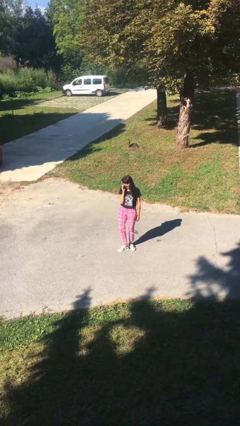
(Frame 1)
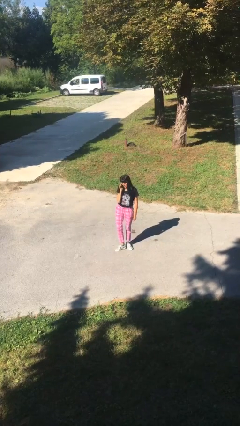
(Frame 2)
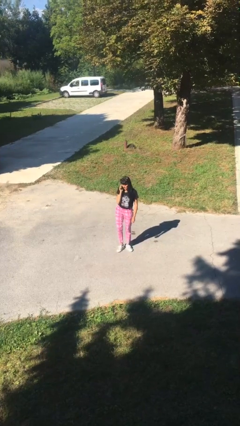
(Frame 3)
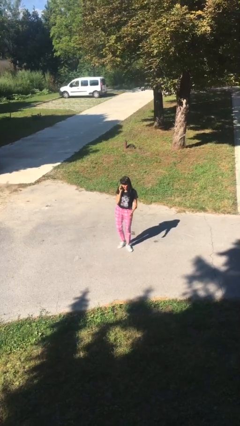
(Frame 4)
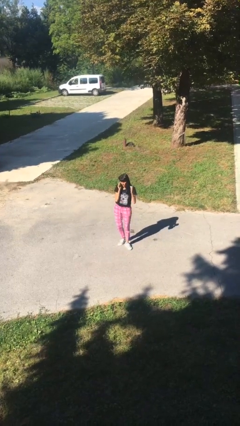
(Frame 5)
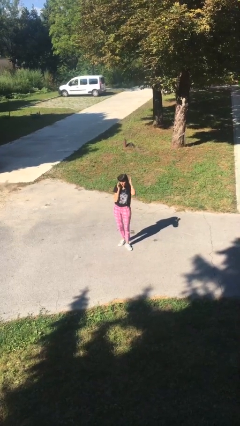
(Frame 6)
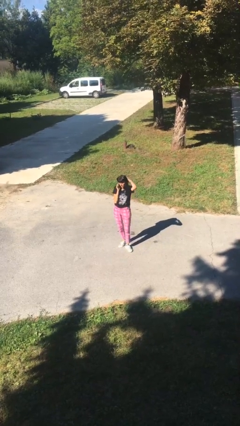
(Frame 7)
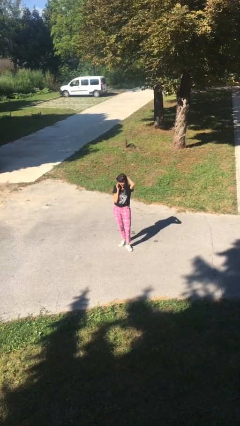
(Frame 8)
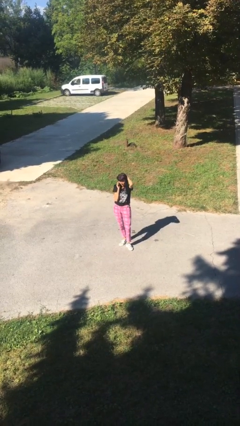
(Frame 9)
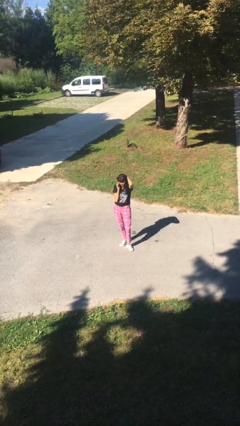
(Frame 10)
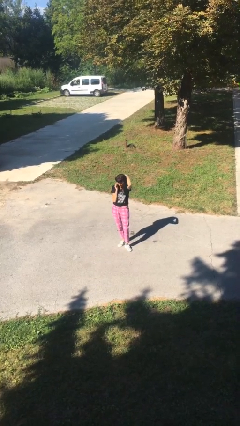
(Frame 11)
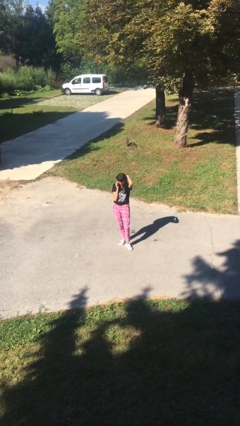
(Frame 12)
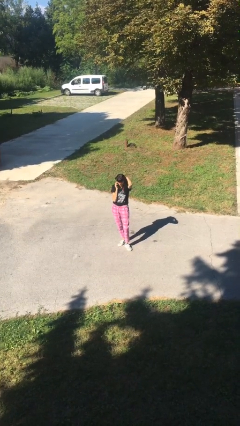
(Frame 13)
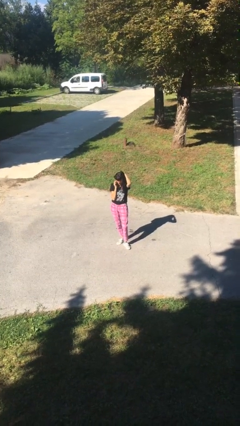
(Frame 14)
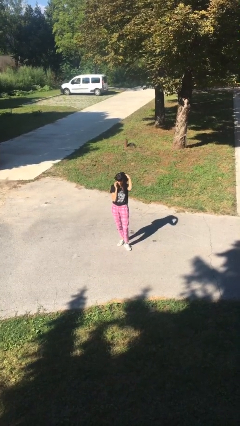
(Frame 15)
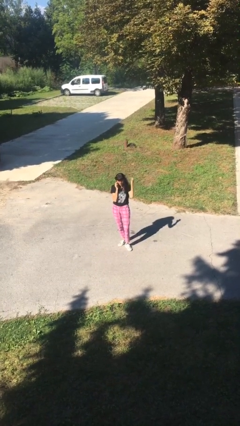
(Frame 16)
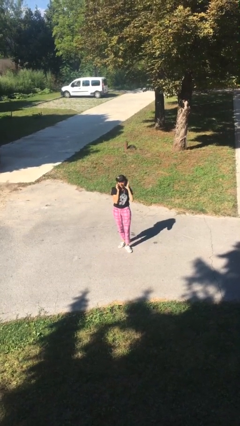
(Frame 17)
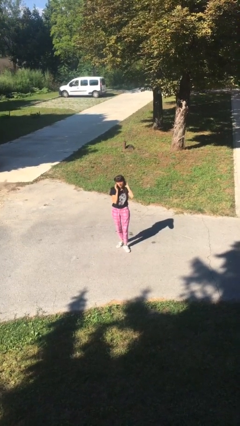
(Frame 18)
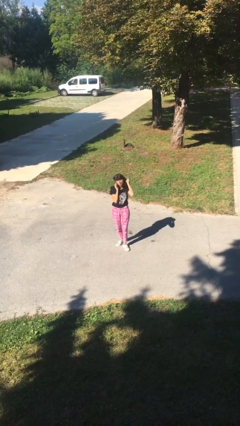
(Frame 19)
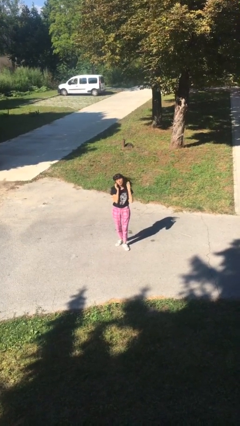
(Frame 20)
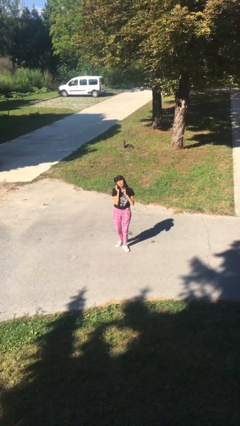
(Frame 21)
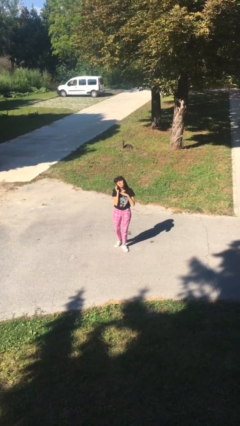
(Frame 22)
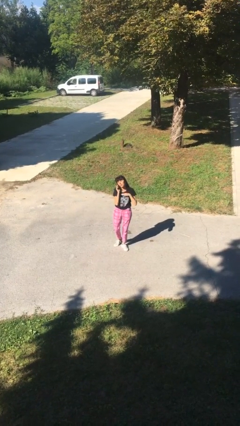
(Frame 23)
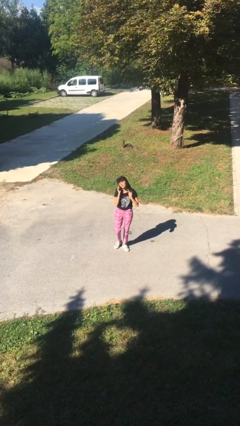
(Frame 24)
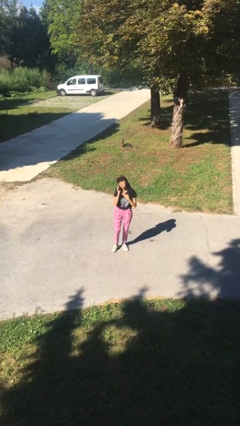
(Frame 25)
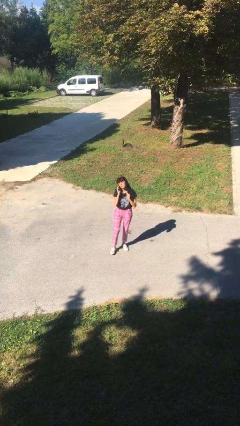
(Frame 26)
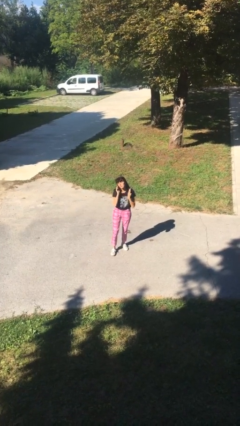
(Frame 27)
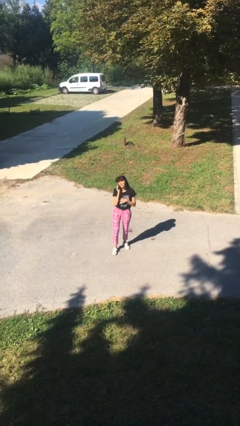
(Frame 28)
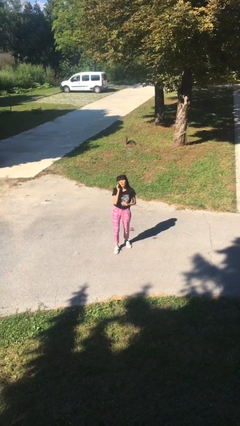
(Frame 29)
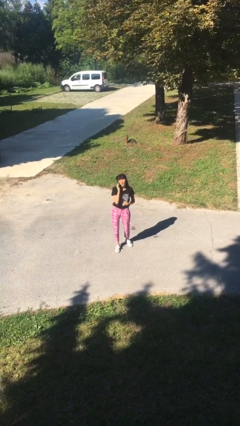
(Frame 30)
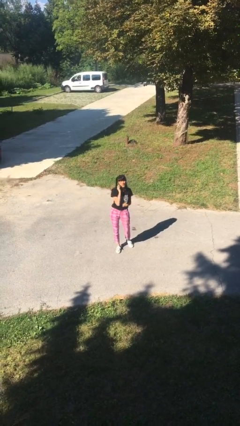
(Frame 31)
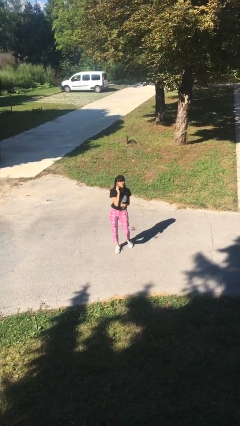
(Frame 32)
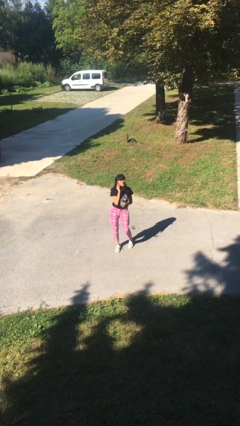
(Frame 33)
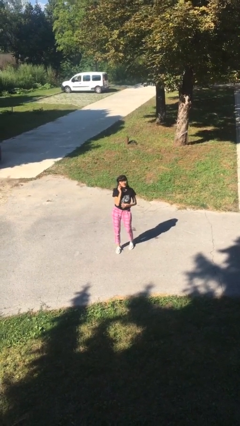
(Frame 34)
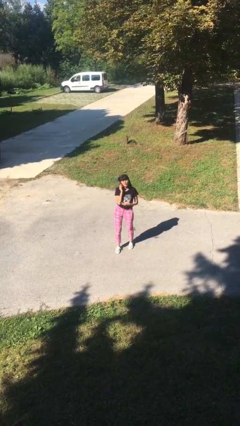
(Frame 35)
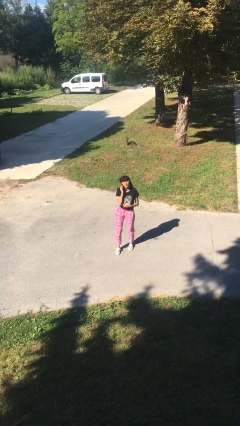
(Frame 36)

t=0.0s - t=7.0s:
person talks on phone

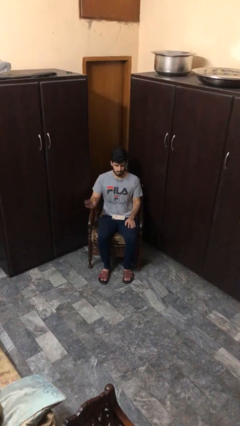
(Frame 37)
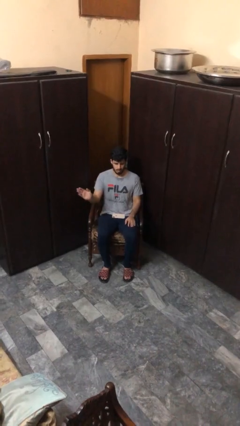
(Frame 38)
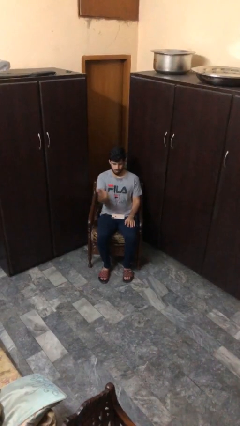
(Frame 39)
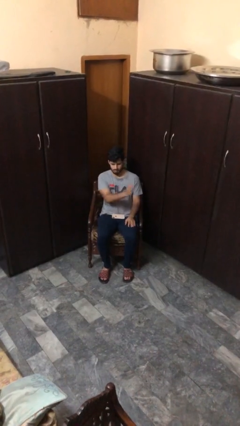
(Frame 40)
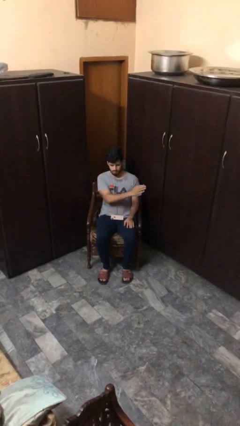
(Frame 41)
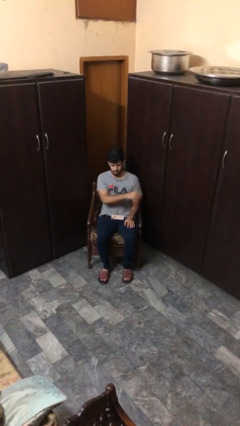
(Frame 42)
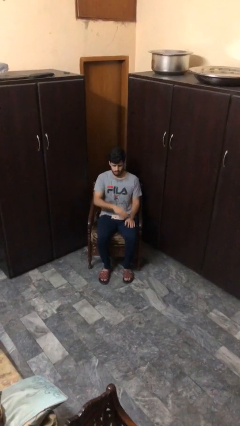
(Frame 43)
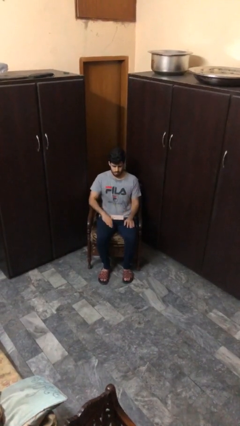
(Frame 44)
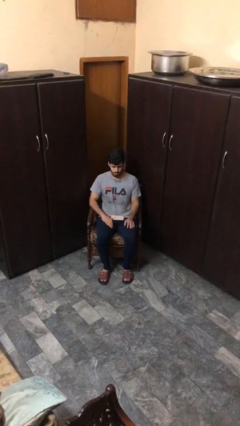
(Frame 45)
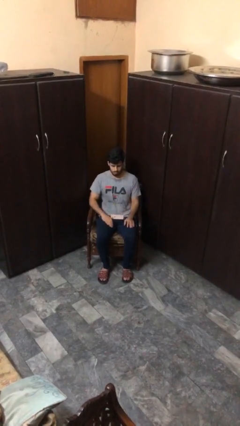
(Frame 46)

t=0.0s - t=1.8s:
person gestures swipe left

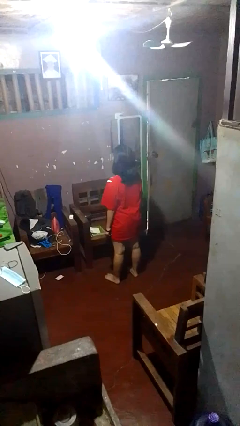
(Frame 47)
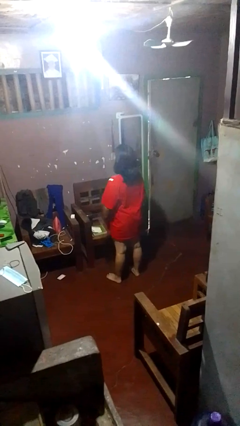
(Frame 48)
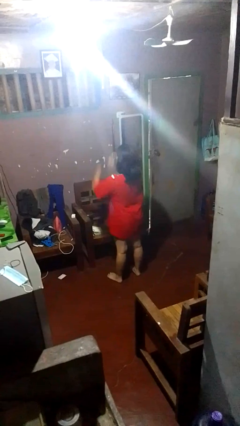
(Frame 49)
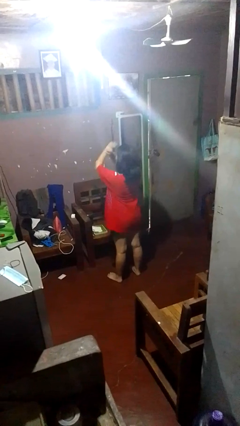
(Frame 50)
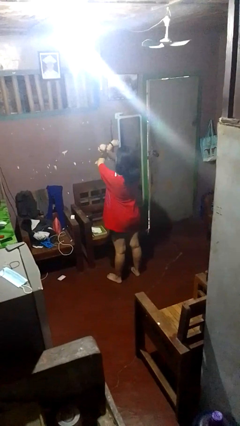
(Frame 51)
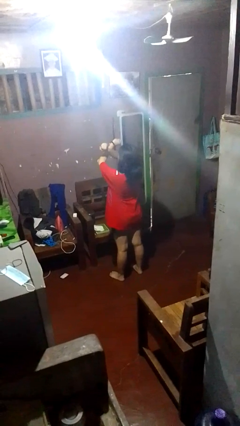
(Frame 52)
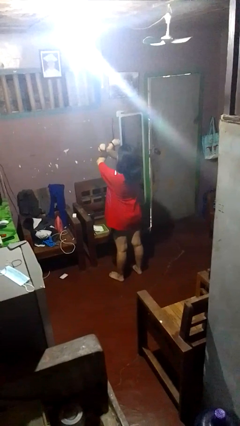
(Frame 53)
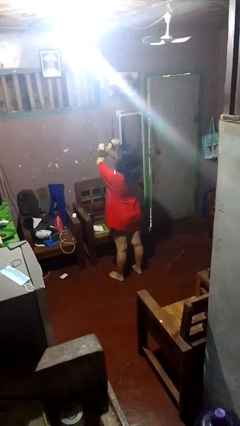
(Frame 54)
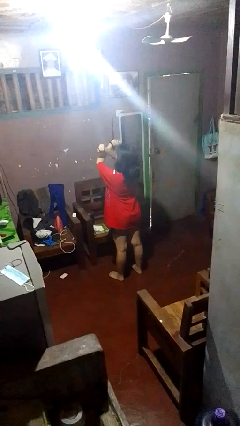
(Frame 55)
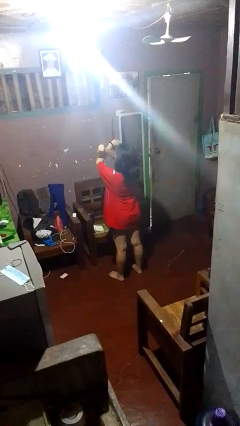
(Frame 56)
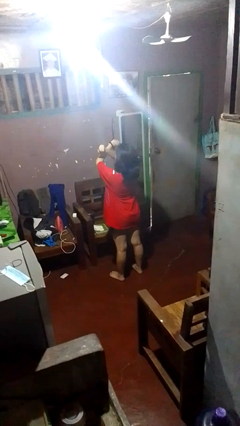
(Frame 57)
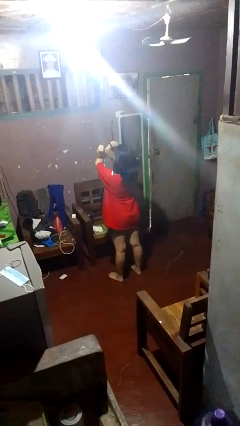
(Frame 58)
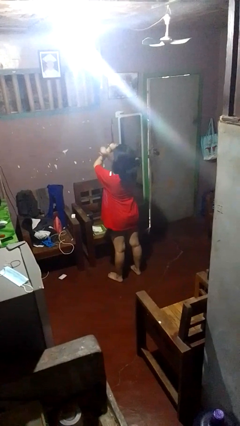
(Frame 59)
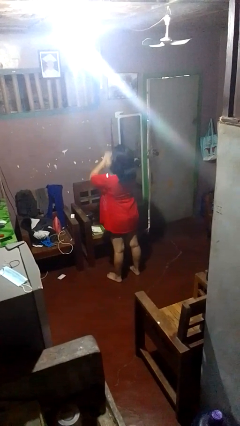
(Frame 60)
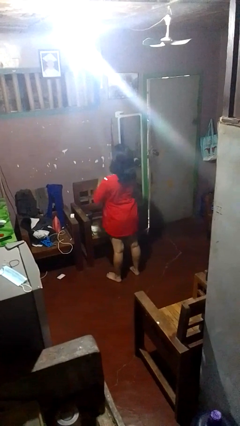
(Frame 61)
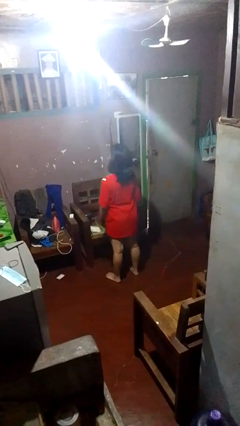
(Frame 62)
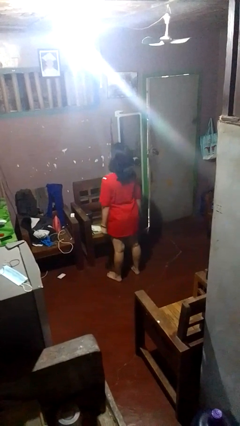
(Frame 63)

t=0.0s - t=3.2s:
person gestures arms x

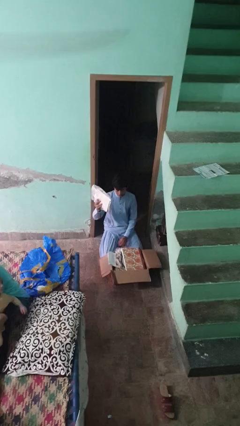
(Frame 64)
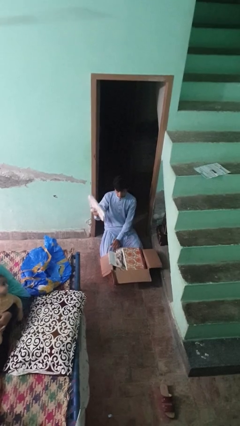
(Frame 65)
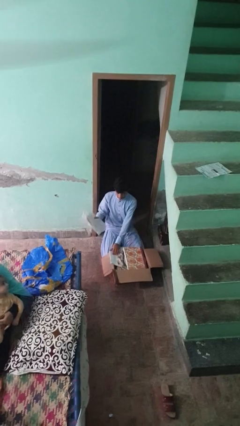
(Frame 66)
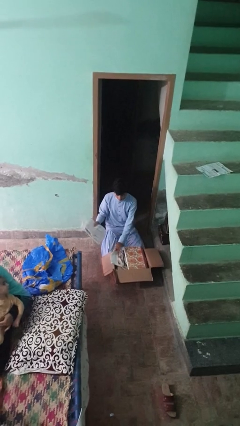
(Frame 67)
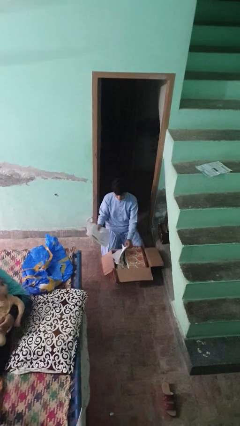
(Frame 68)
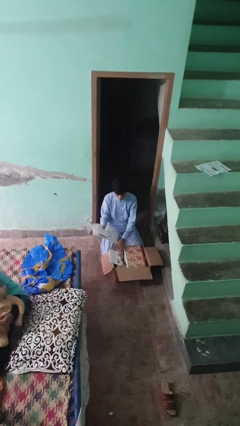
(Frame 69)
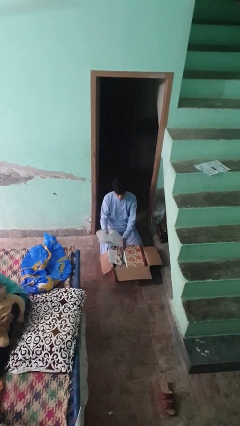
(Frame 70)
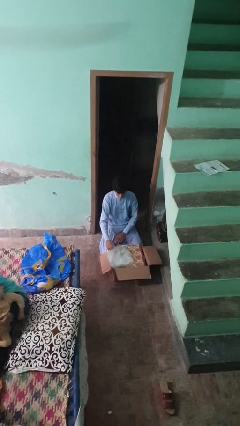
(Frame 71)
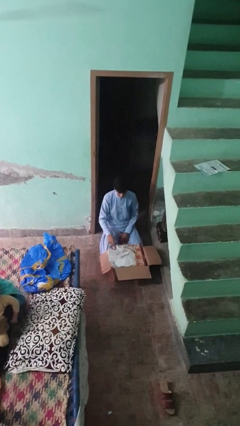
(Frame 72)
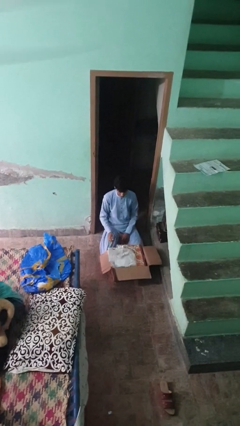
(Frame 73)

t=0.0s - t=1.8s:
person puts object into box

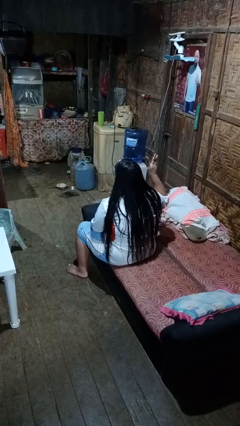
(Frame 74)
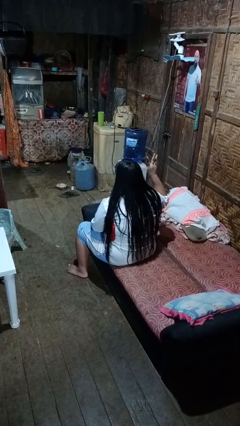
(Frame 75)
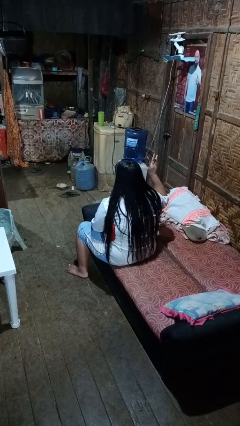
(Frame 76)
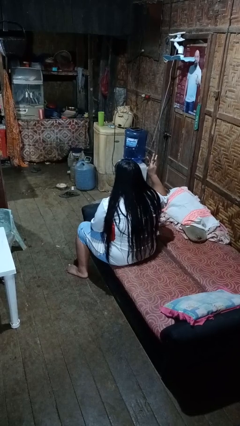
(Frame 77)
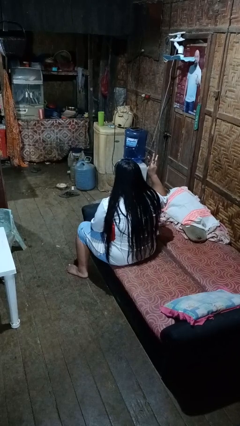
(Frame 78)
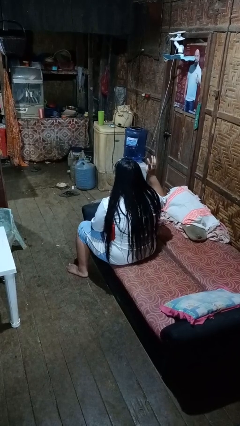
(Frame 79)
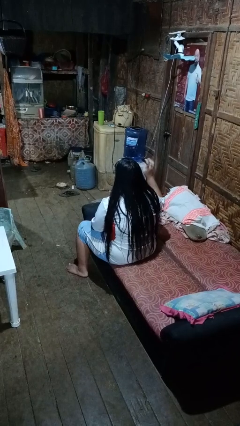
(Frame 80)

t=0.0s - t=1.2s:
person gestures number three

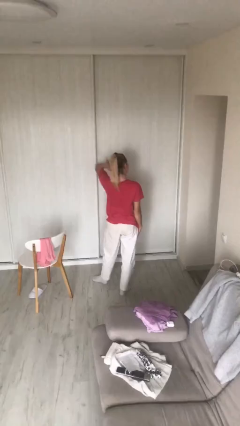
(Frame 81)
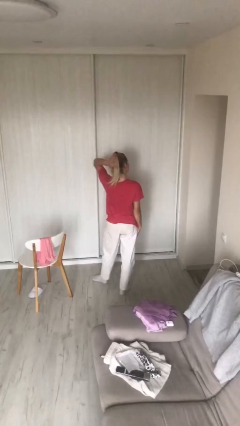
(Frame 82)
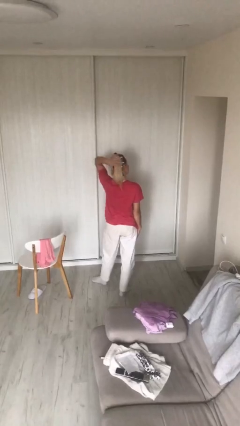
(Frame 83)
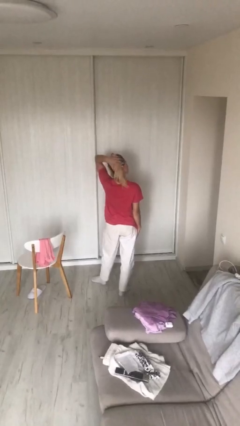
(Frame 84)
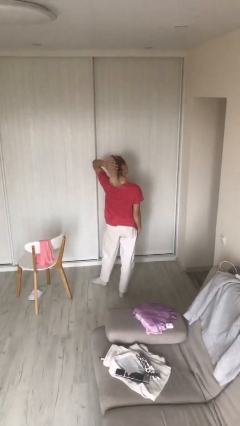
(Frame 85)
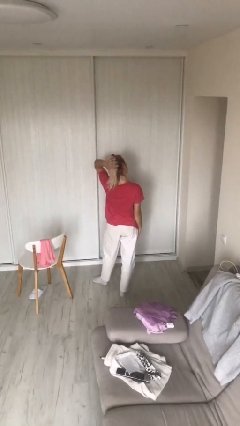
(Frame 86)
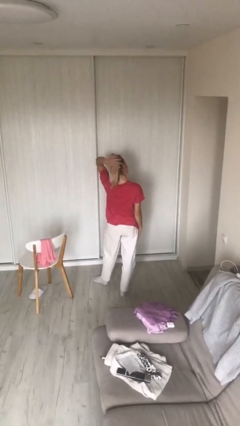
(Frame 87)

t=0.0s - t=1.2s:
person pats head

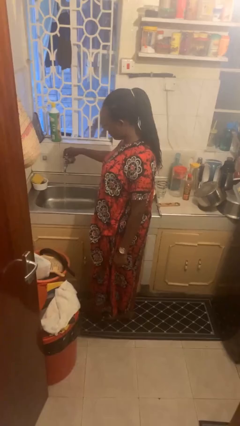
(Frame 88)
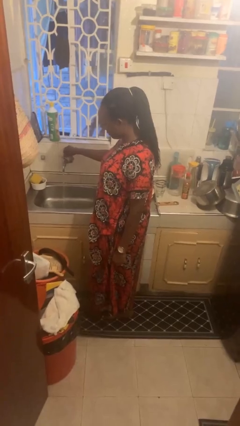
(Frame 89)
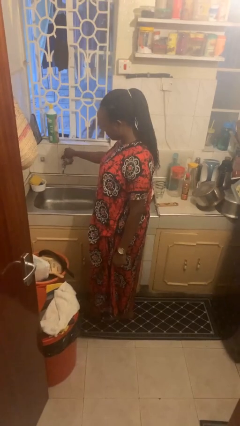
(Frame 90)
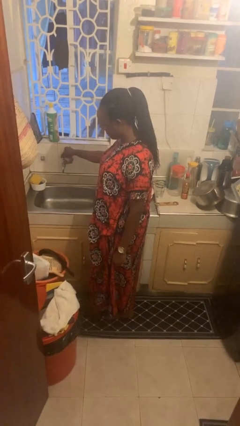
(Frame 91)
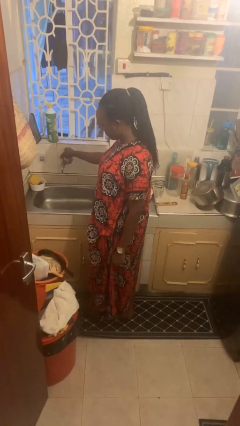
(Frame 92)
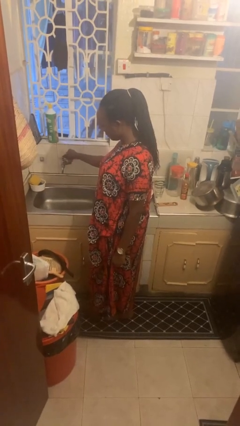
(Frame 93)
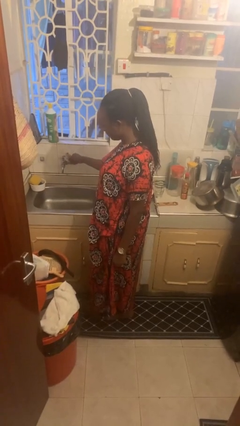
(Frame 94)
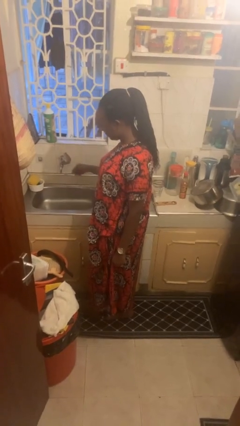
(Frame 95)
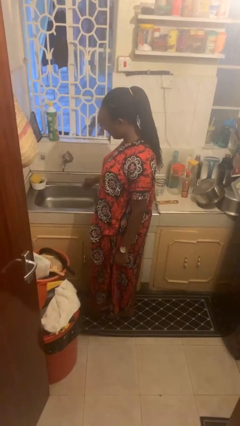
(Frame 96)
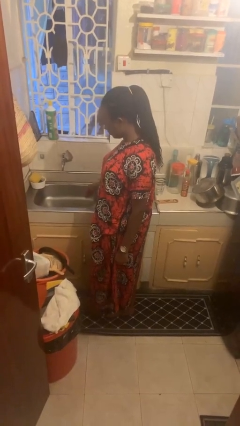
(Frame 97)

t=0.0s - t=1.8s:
person turns off faucet
